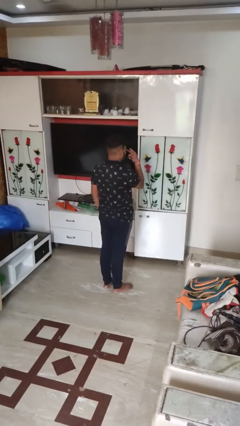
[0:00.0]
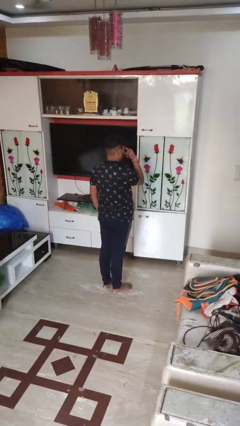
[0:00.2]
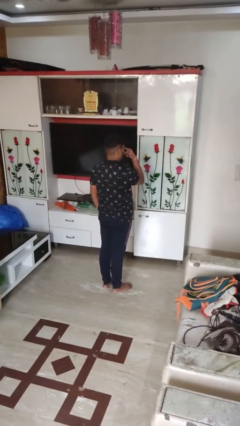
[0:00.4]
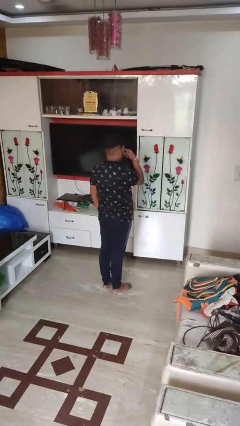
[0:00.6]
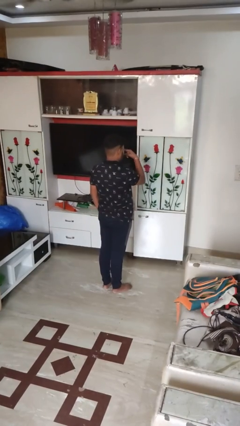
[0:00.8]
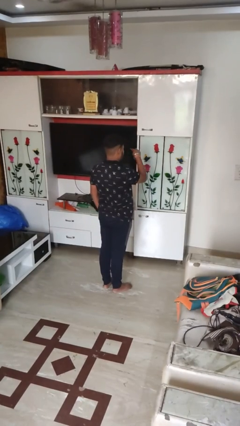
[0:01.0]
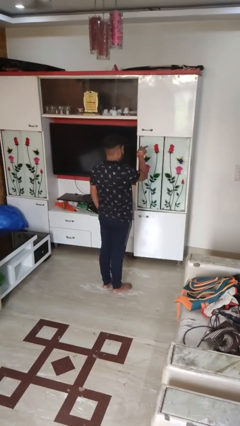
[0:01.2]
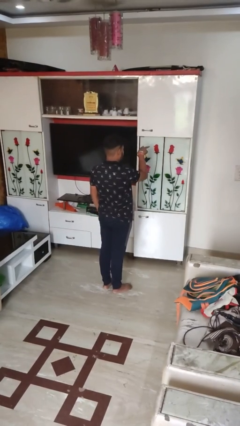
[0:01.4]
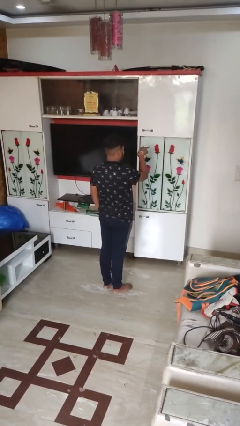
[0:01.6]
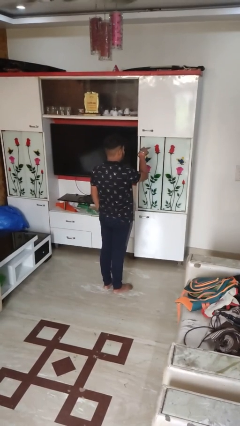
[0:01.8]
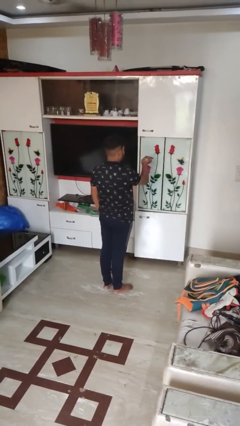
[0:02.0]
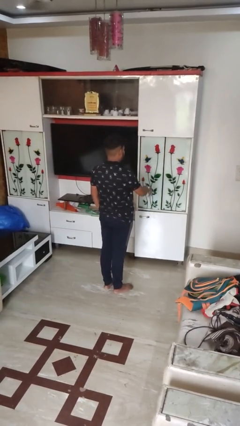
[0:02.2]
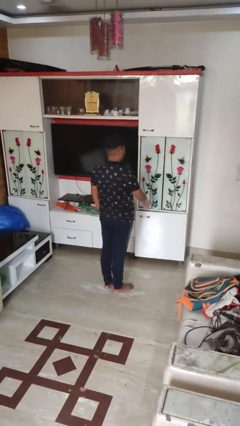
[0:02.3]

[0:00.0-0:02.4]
person gestures watch closely

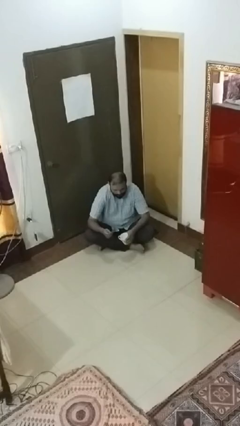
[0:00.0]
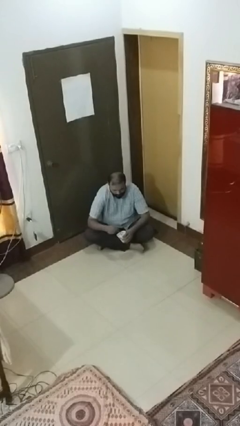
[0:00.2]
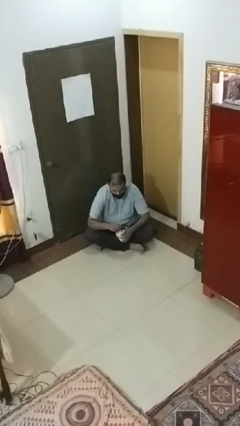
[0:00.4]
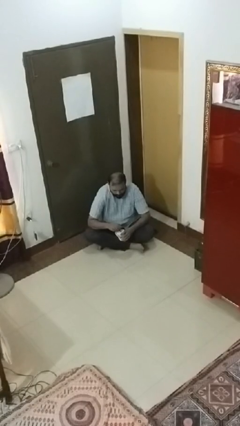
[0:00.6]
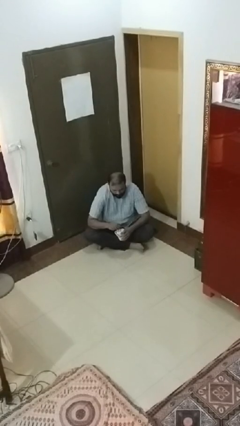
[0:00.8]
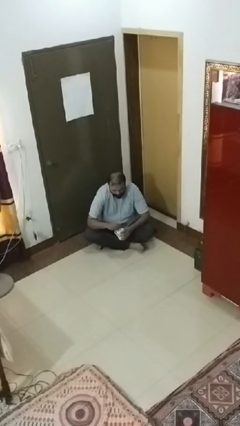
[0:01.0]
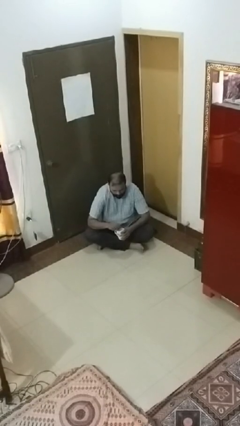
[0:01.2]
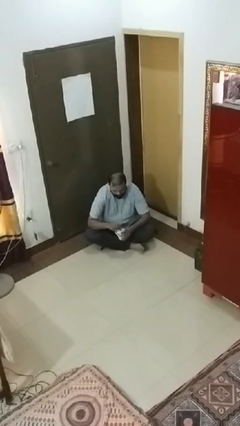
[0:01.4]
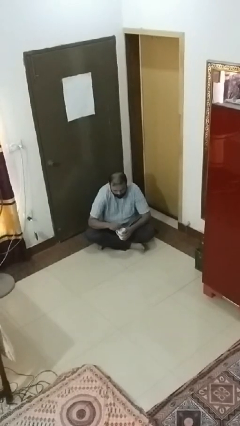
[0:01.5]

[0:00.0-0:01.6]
person stirs mug

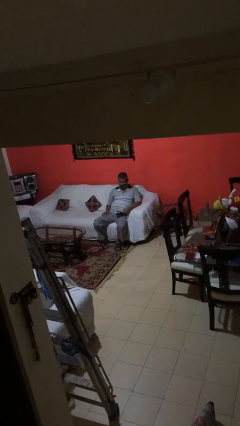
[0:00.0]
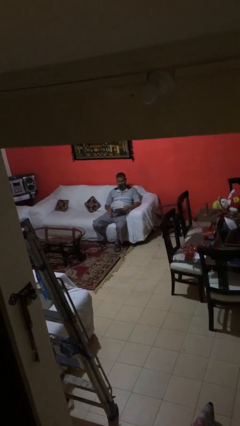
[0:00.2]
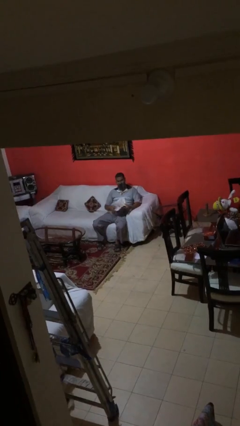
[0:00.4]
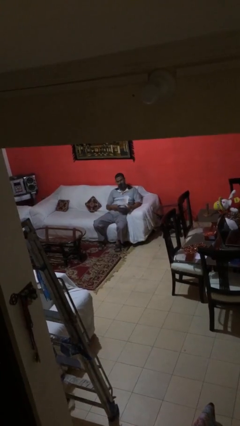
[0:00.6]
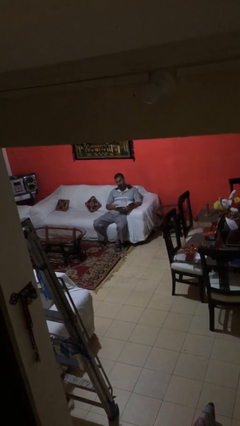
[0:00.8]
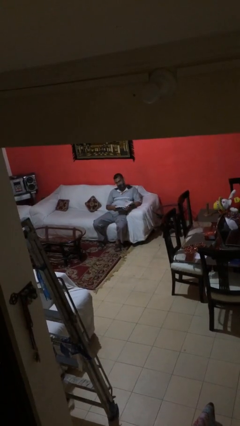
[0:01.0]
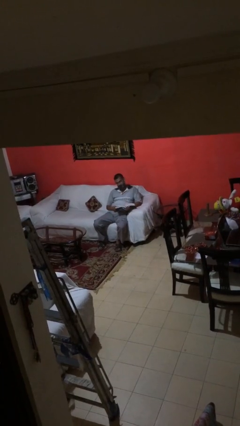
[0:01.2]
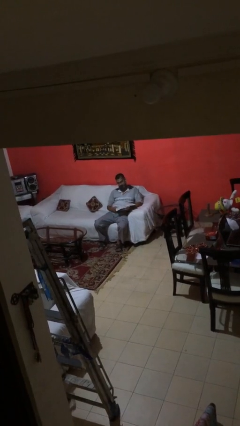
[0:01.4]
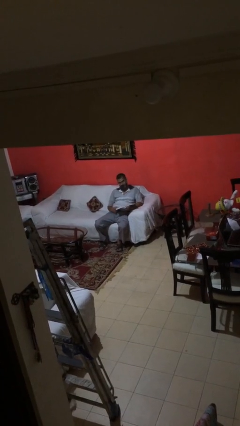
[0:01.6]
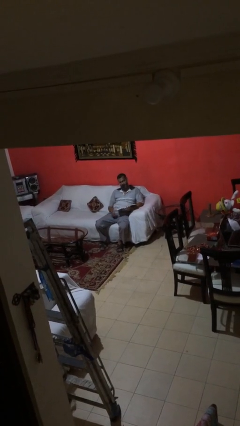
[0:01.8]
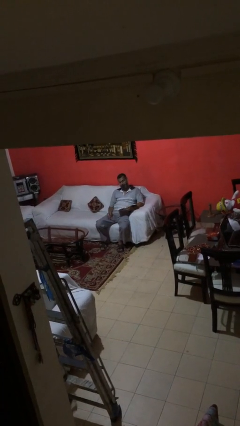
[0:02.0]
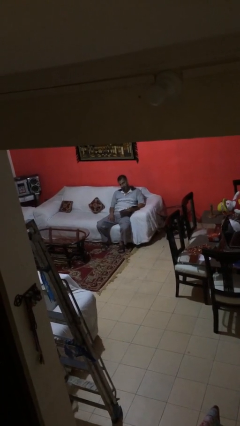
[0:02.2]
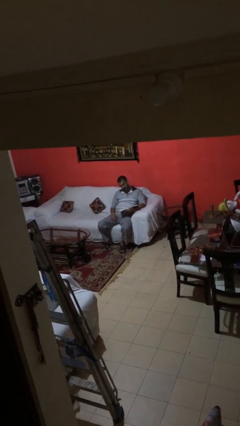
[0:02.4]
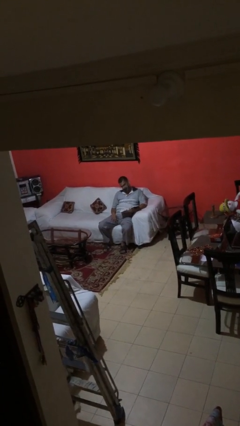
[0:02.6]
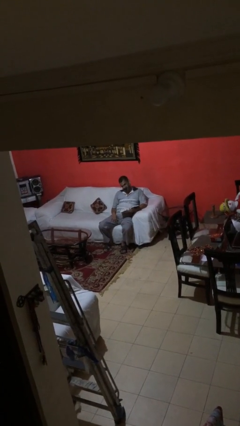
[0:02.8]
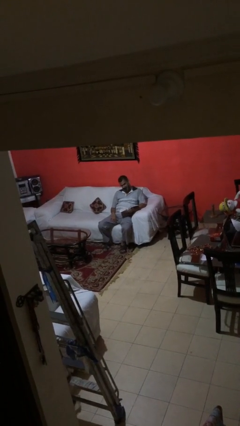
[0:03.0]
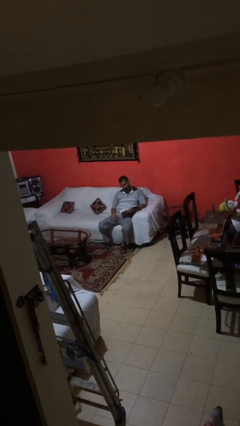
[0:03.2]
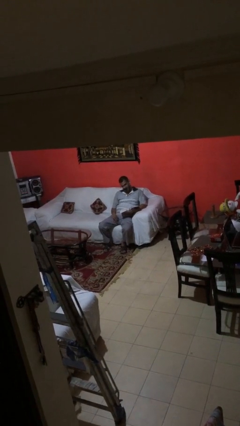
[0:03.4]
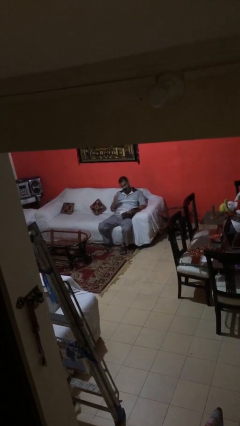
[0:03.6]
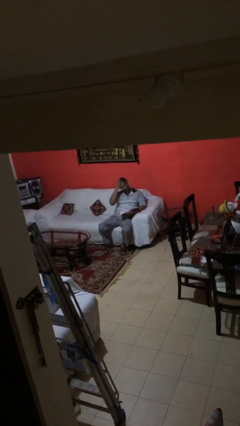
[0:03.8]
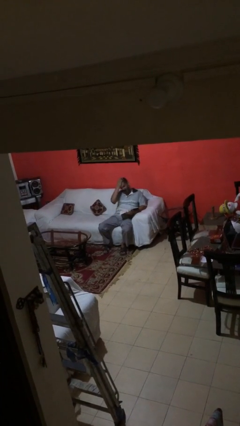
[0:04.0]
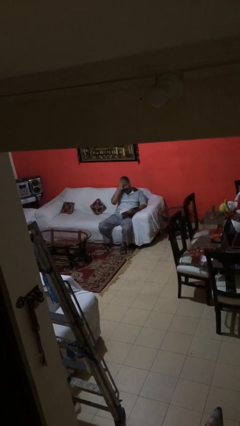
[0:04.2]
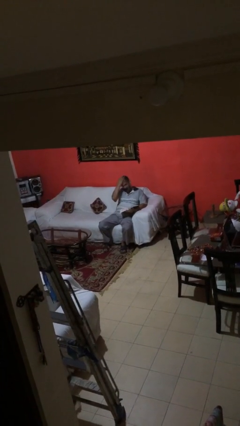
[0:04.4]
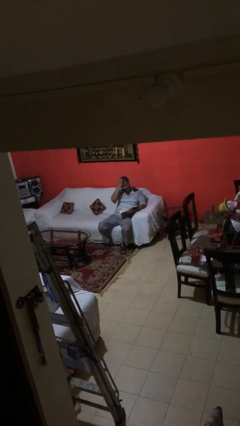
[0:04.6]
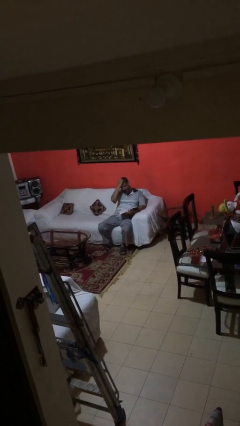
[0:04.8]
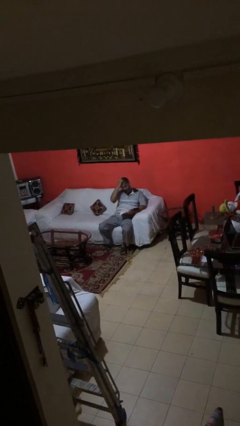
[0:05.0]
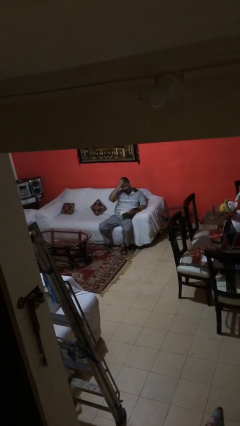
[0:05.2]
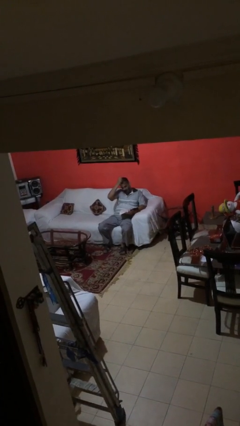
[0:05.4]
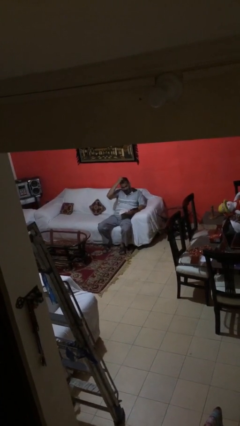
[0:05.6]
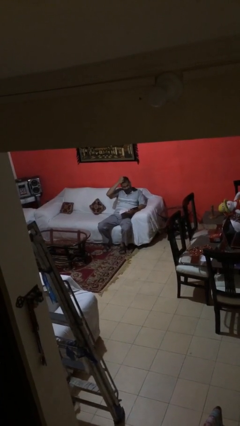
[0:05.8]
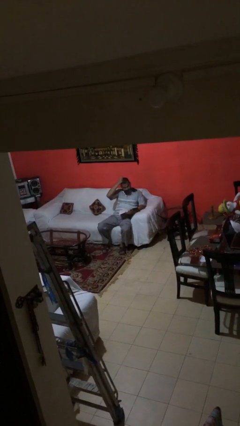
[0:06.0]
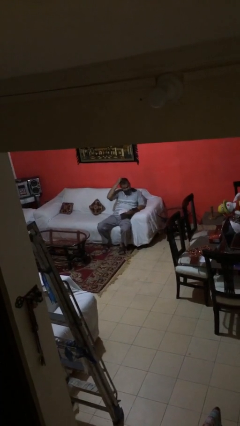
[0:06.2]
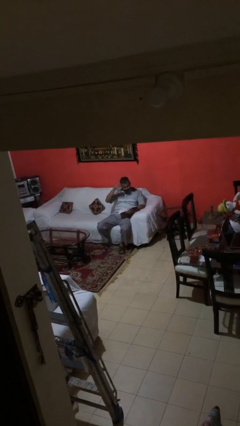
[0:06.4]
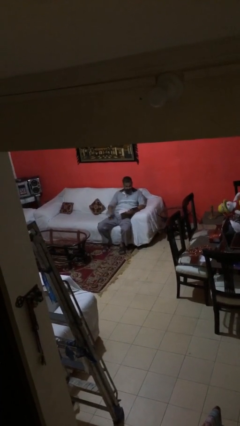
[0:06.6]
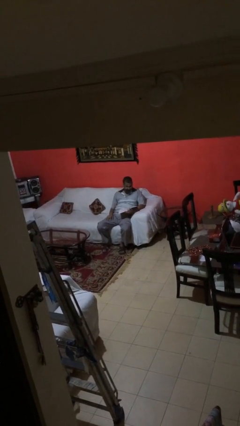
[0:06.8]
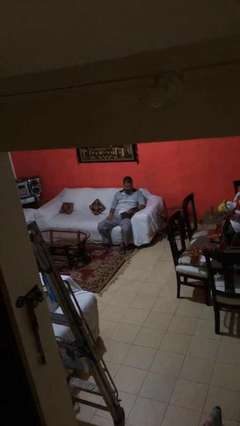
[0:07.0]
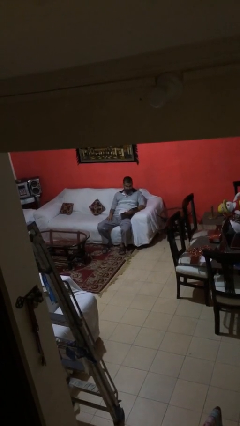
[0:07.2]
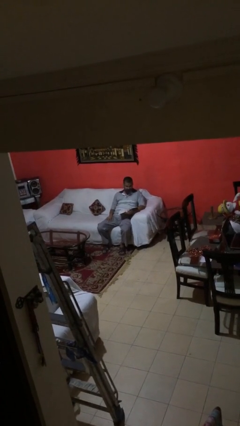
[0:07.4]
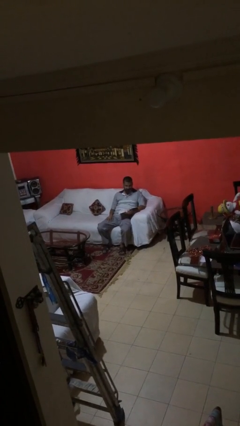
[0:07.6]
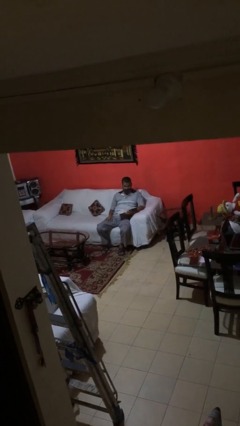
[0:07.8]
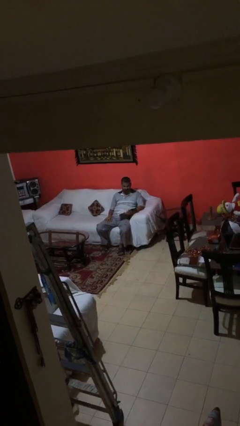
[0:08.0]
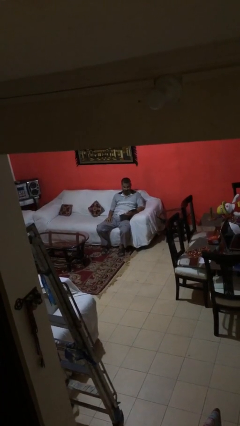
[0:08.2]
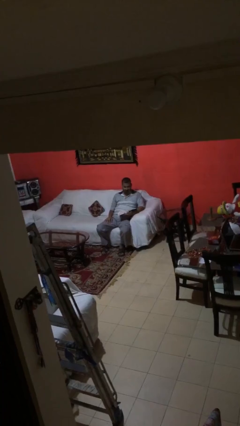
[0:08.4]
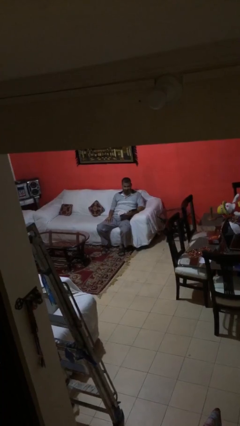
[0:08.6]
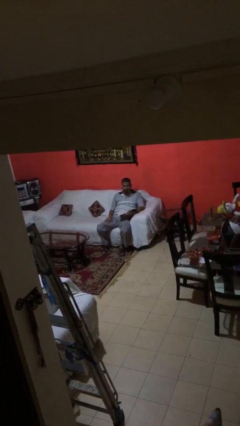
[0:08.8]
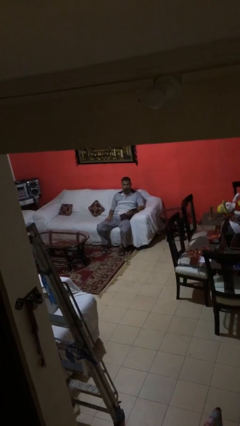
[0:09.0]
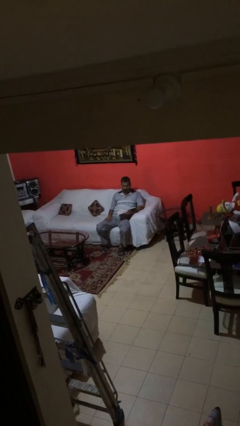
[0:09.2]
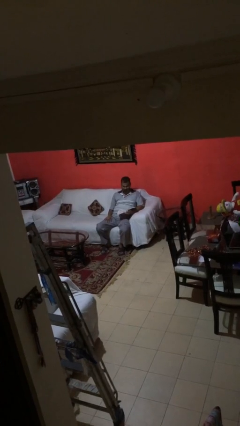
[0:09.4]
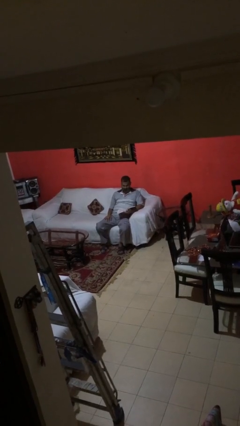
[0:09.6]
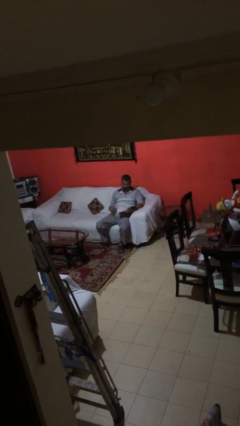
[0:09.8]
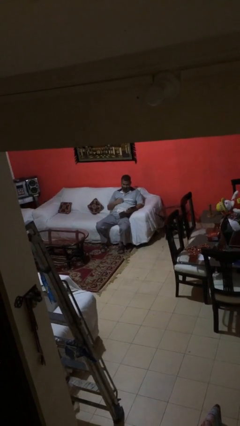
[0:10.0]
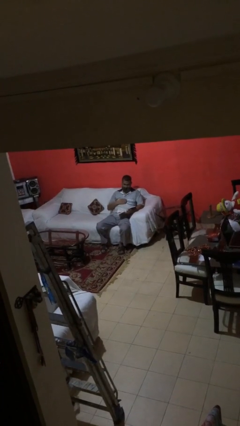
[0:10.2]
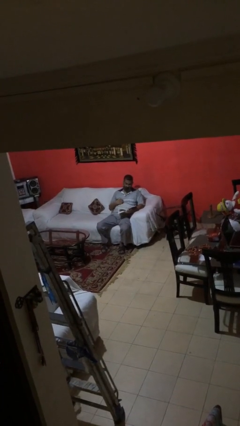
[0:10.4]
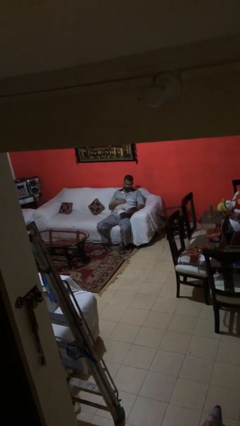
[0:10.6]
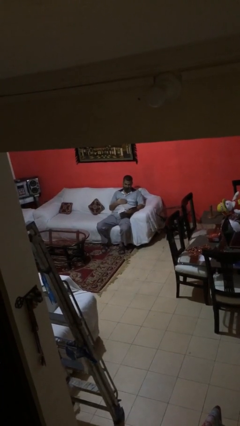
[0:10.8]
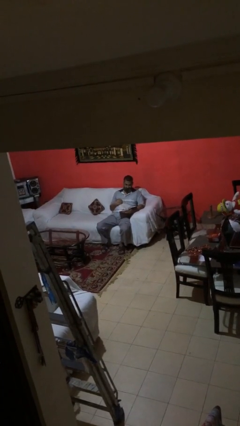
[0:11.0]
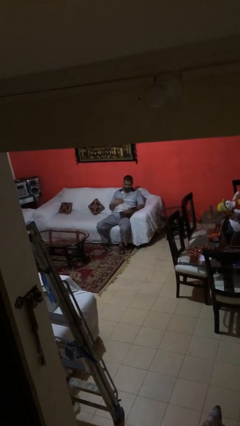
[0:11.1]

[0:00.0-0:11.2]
person reads document

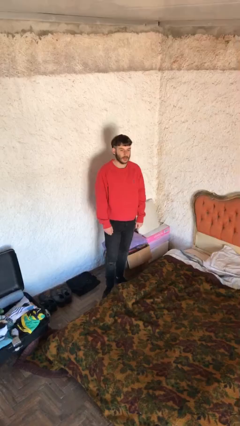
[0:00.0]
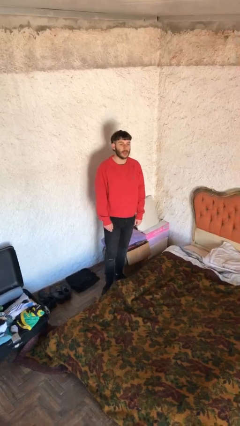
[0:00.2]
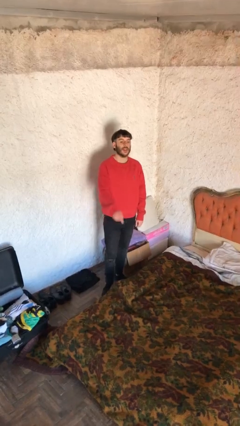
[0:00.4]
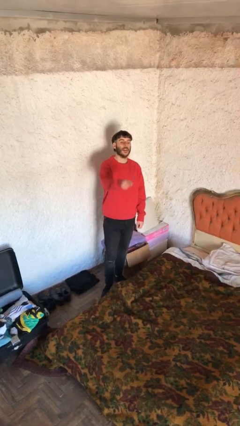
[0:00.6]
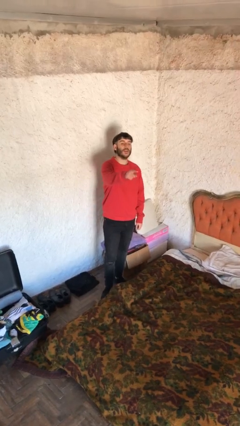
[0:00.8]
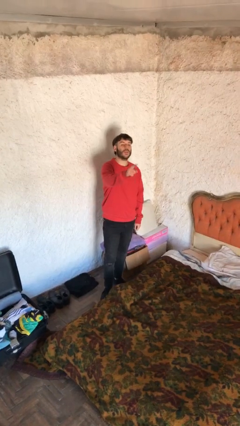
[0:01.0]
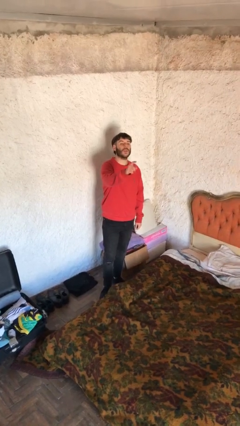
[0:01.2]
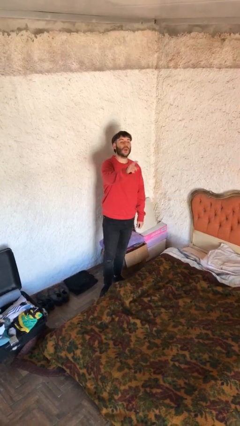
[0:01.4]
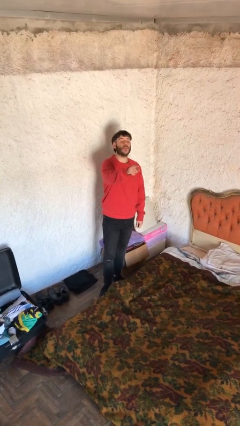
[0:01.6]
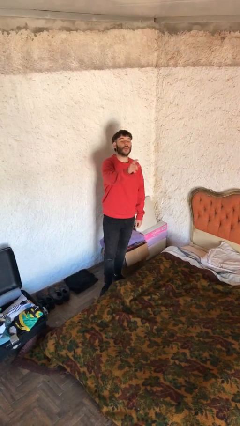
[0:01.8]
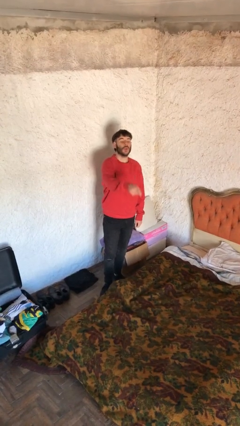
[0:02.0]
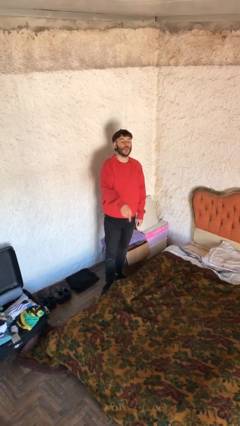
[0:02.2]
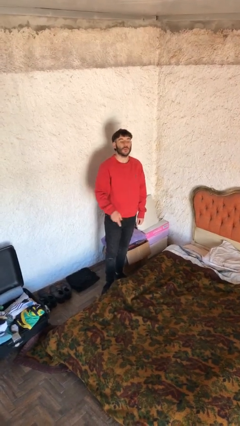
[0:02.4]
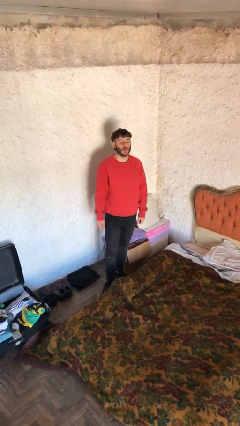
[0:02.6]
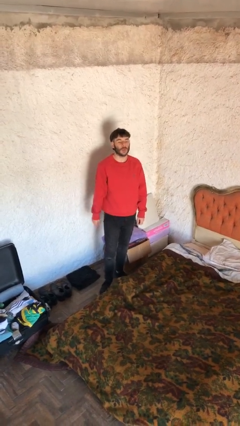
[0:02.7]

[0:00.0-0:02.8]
person points at person
